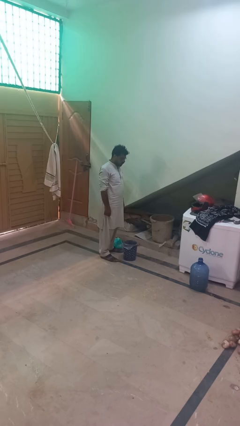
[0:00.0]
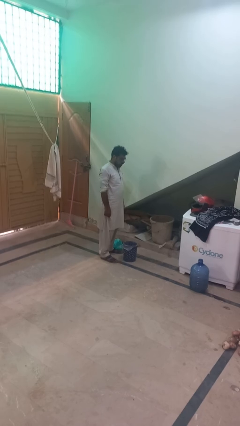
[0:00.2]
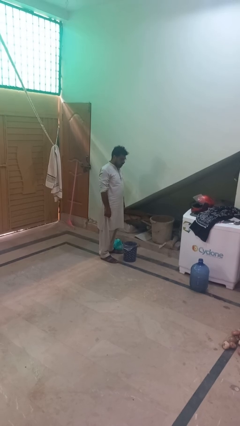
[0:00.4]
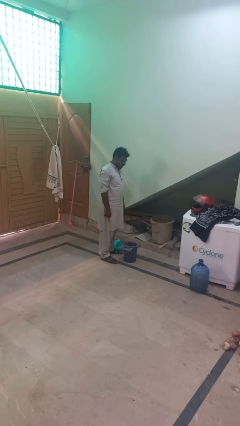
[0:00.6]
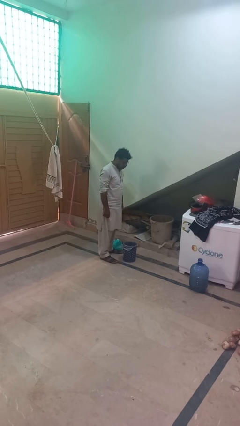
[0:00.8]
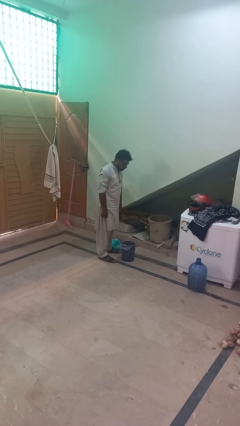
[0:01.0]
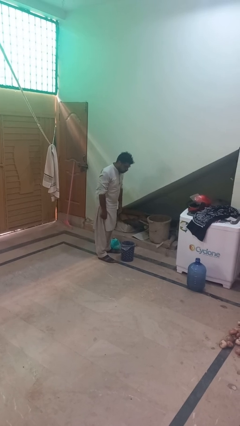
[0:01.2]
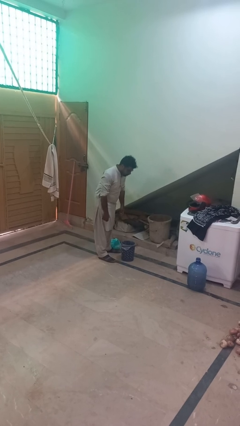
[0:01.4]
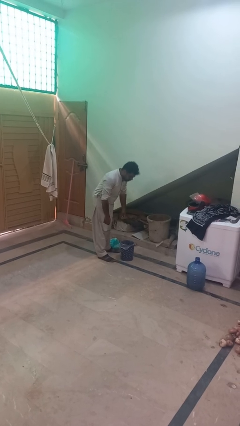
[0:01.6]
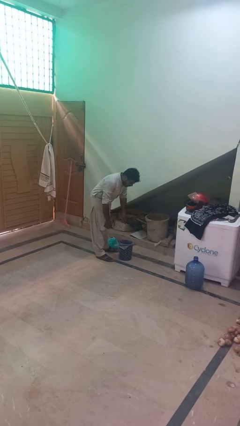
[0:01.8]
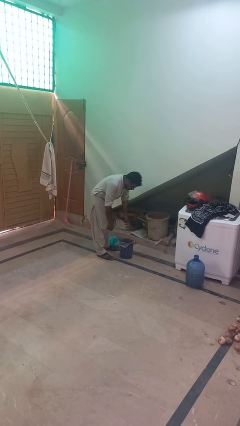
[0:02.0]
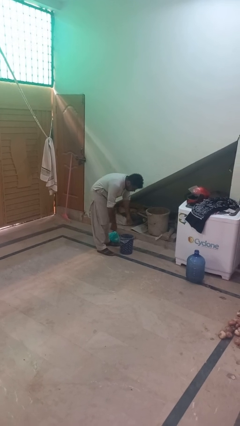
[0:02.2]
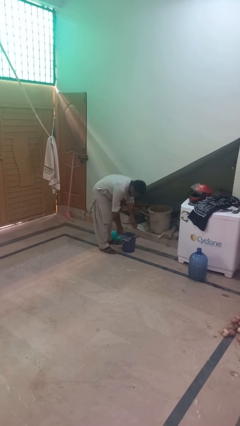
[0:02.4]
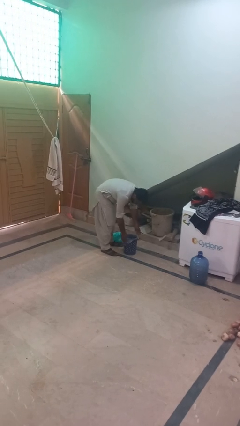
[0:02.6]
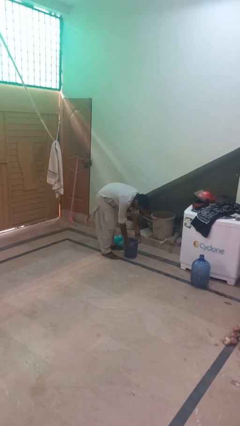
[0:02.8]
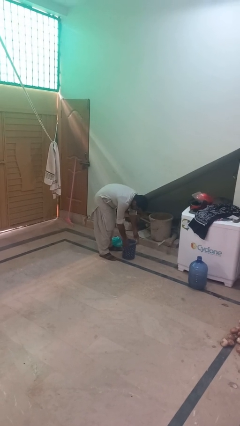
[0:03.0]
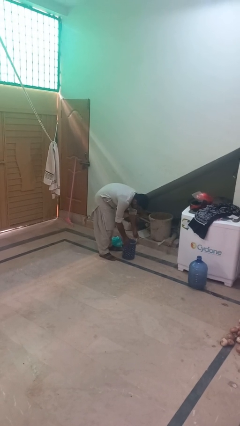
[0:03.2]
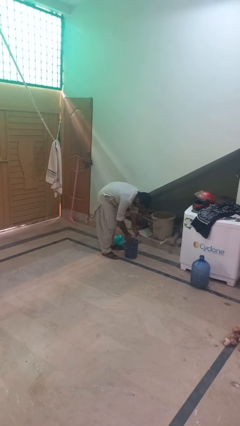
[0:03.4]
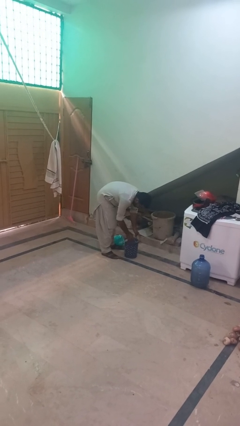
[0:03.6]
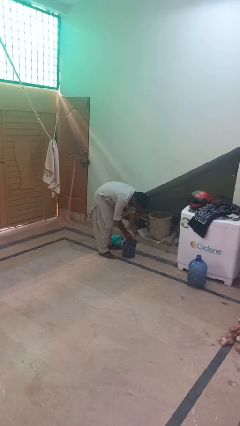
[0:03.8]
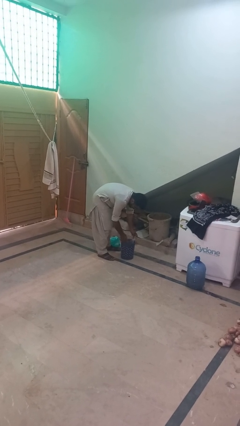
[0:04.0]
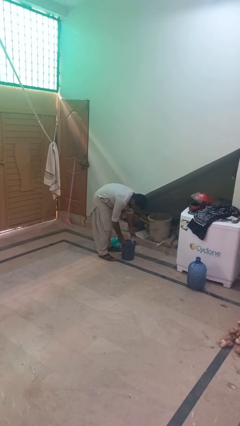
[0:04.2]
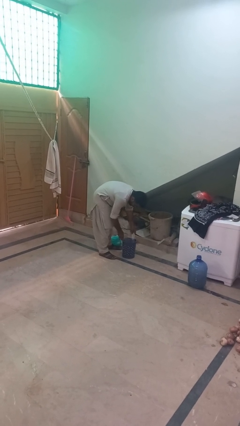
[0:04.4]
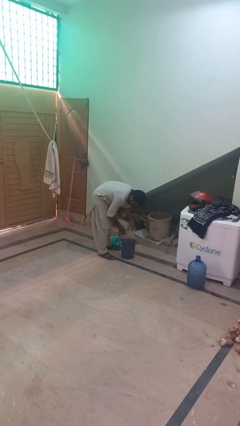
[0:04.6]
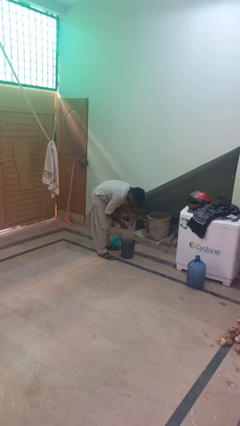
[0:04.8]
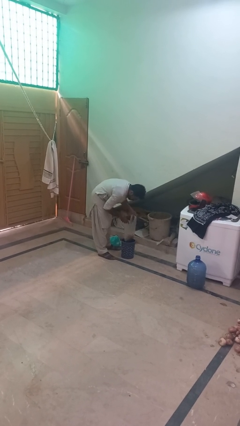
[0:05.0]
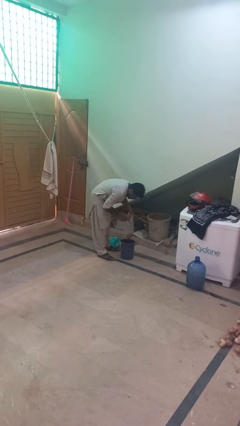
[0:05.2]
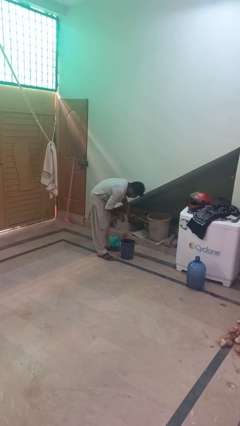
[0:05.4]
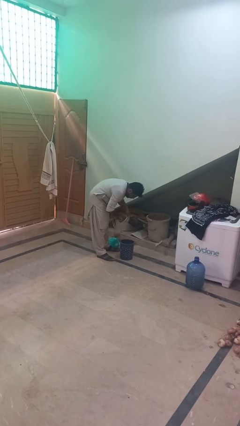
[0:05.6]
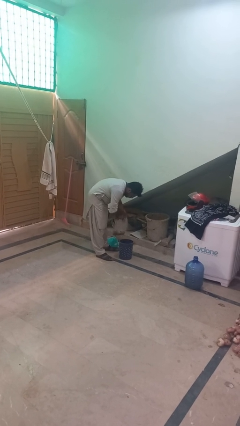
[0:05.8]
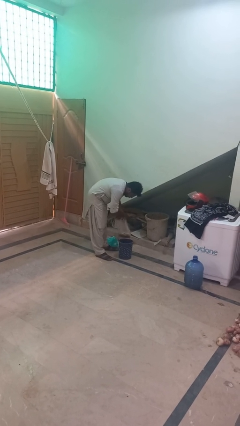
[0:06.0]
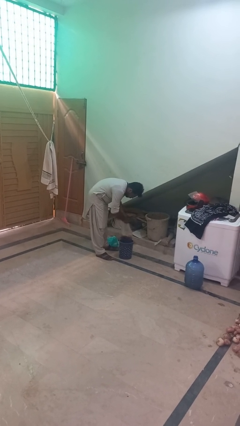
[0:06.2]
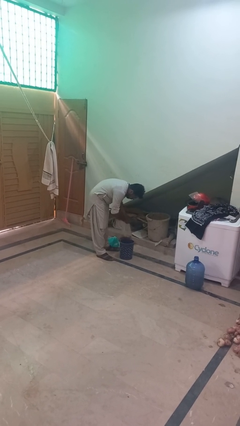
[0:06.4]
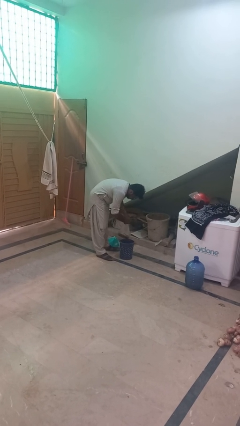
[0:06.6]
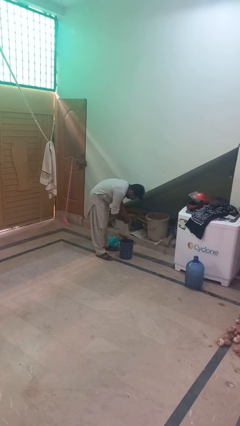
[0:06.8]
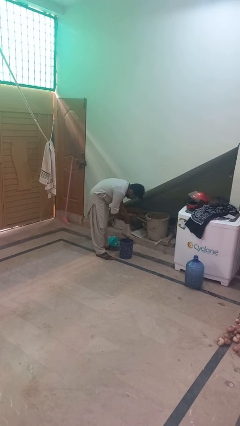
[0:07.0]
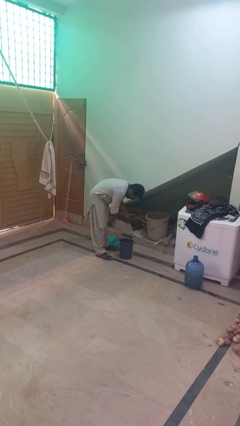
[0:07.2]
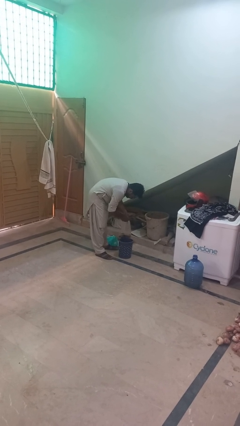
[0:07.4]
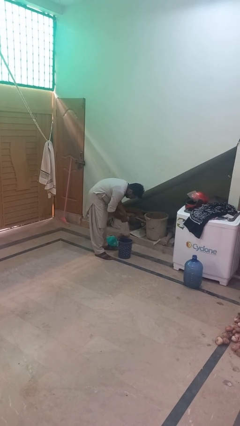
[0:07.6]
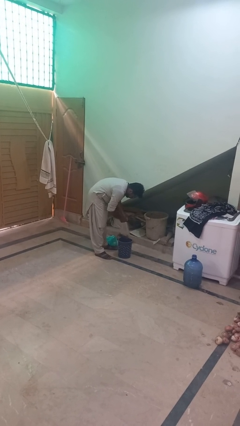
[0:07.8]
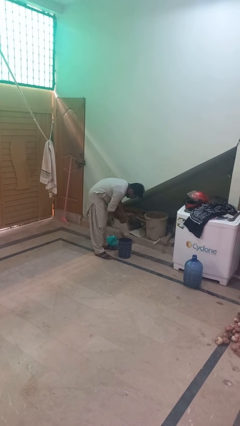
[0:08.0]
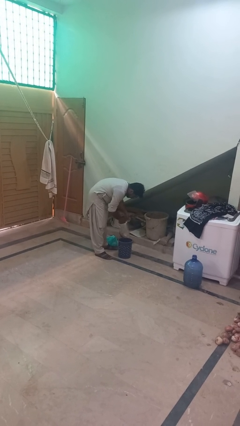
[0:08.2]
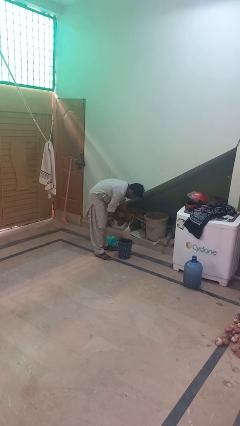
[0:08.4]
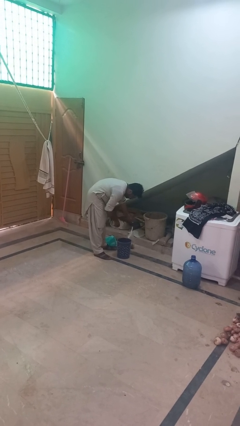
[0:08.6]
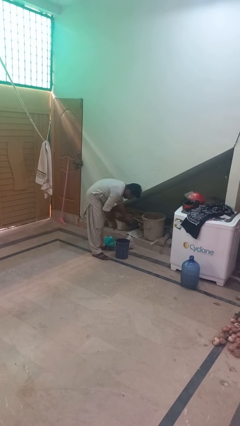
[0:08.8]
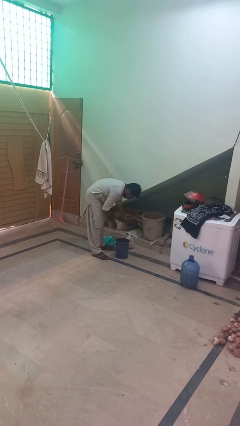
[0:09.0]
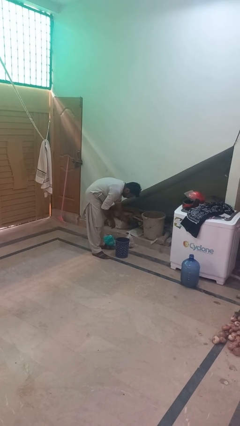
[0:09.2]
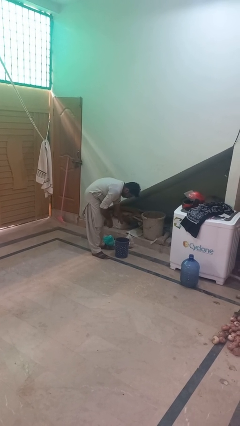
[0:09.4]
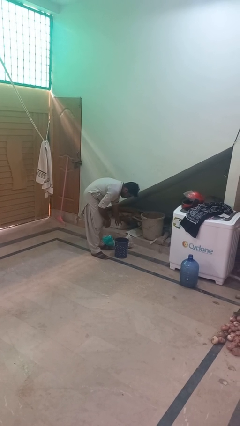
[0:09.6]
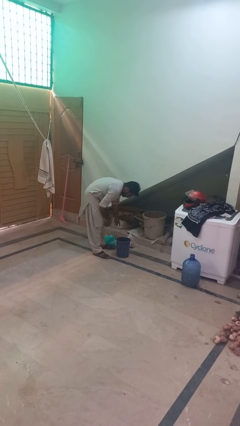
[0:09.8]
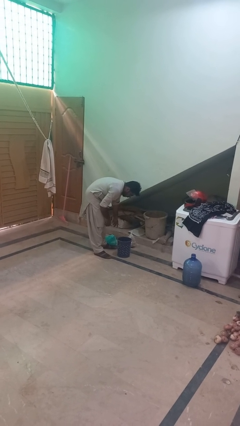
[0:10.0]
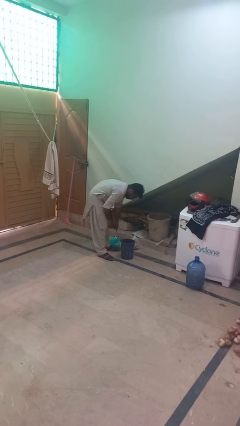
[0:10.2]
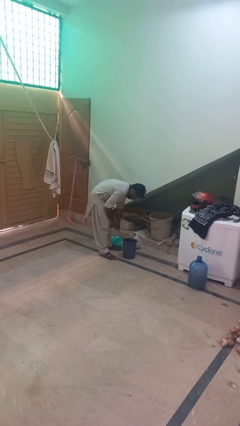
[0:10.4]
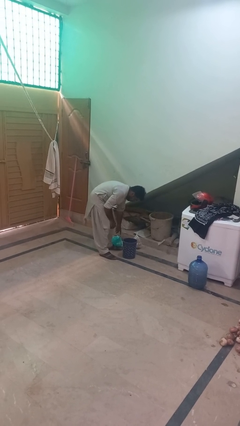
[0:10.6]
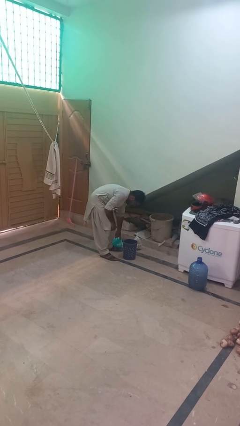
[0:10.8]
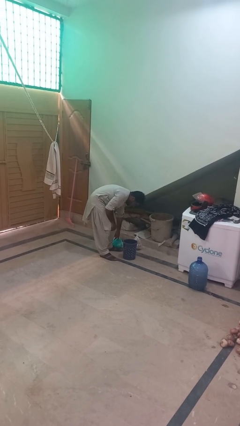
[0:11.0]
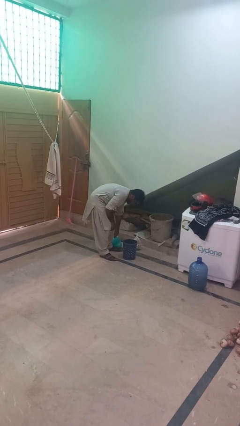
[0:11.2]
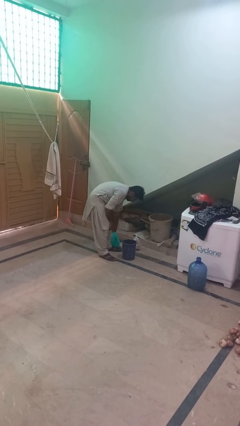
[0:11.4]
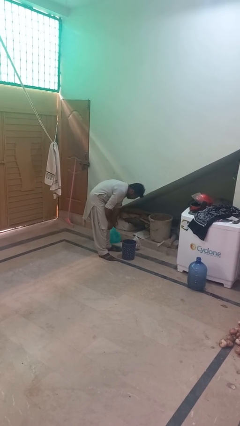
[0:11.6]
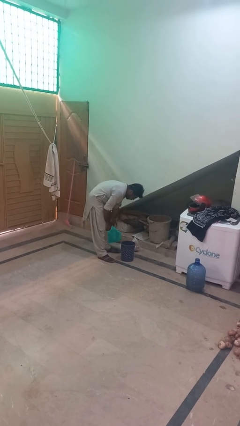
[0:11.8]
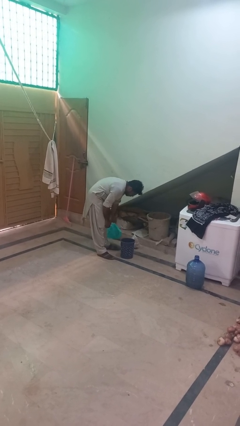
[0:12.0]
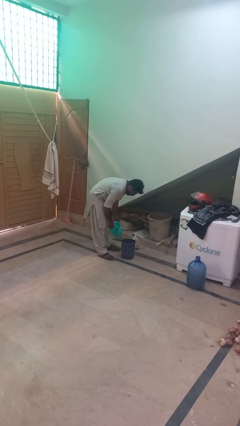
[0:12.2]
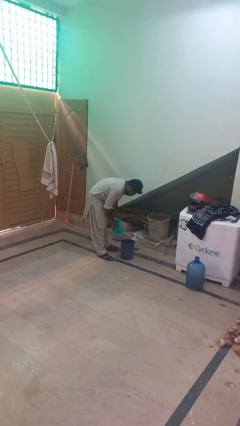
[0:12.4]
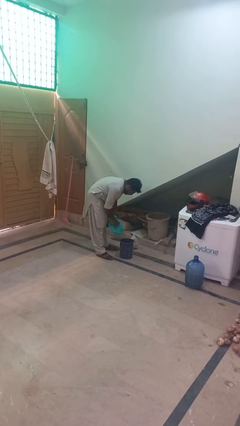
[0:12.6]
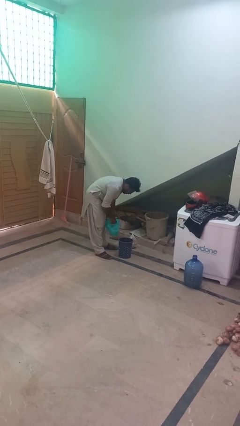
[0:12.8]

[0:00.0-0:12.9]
person removes trashbag from trashcan

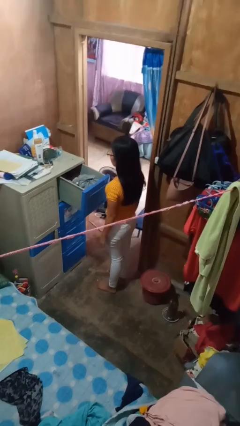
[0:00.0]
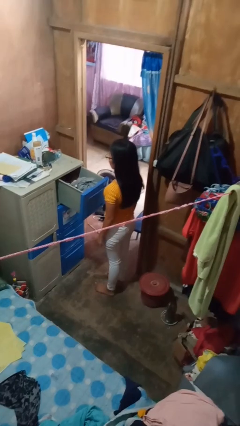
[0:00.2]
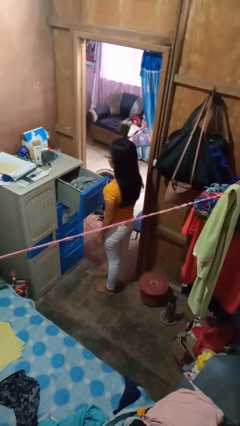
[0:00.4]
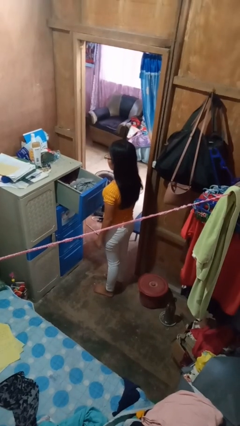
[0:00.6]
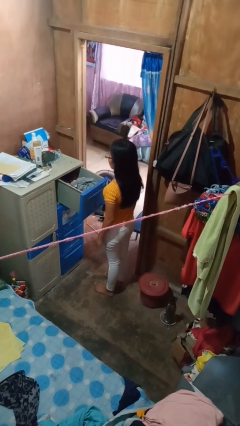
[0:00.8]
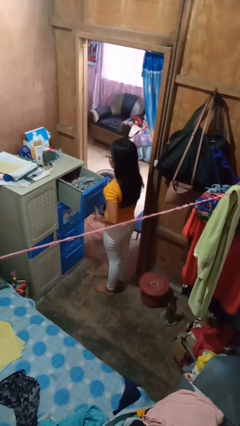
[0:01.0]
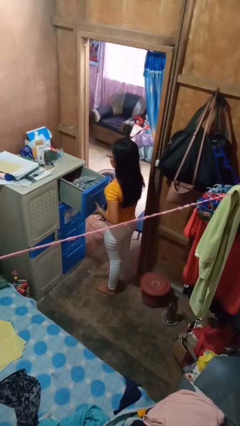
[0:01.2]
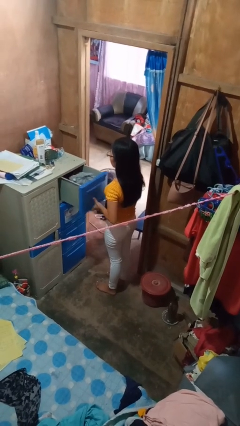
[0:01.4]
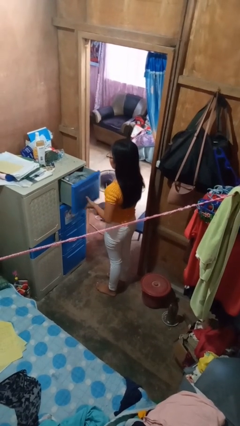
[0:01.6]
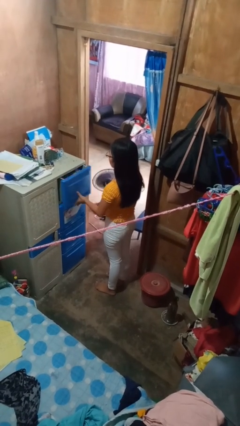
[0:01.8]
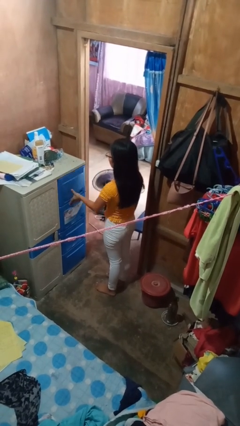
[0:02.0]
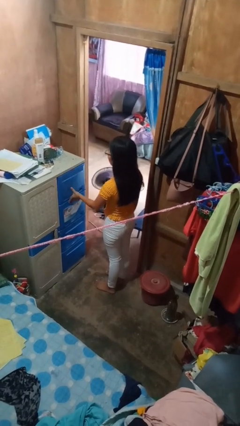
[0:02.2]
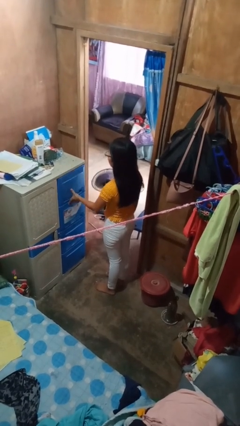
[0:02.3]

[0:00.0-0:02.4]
person closes dresser drawer

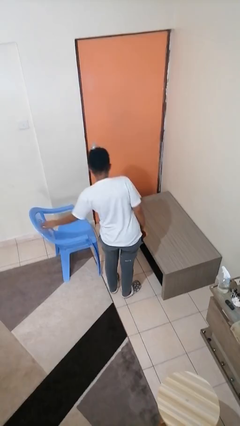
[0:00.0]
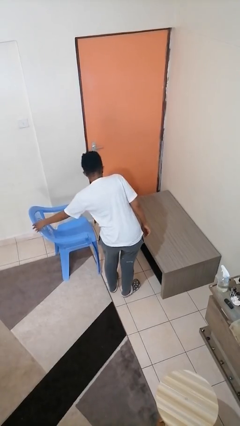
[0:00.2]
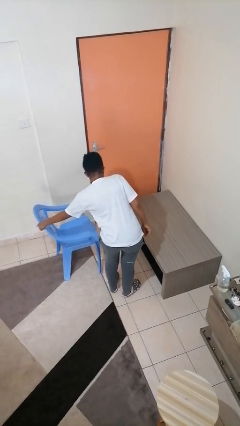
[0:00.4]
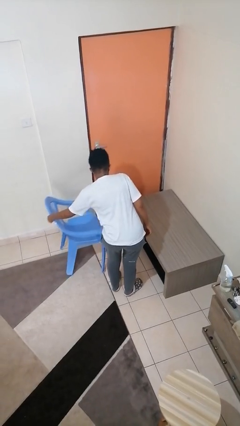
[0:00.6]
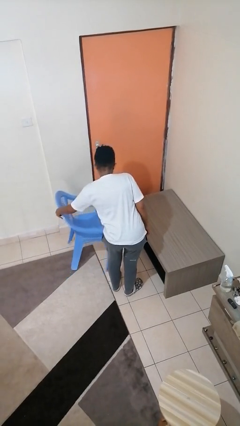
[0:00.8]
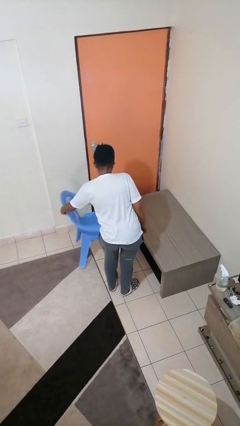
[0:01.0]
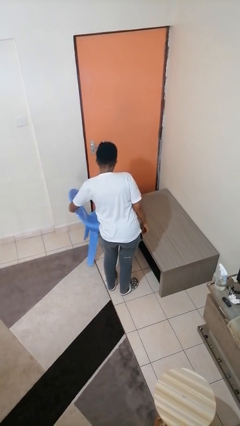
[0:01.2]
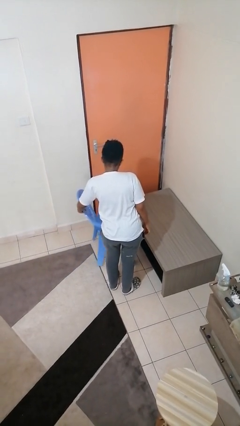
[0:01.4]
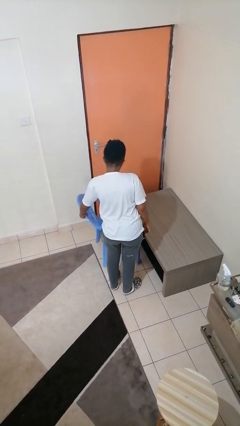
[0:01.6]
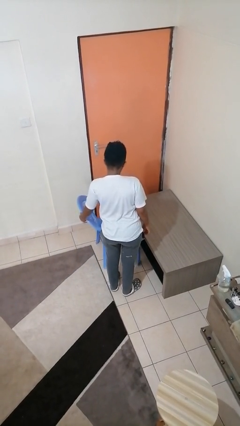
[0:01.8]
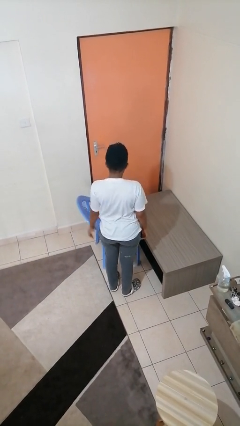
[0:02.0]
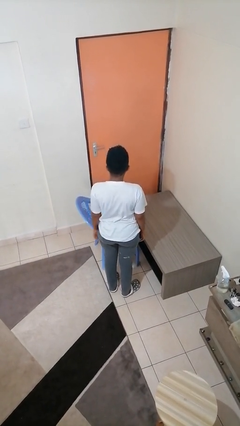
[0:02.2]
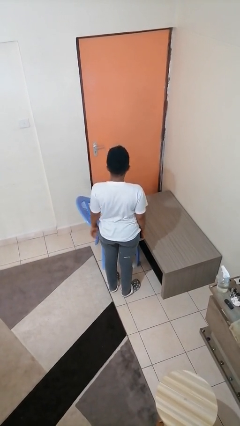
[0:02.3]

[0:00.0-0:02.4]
person pushes in chair

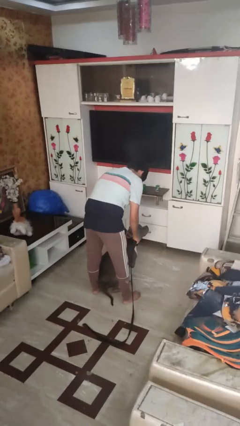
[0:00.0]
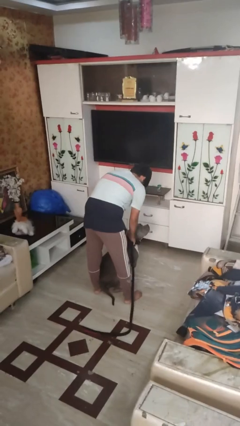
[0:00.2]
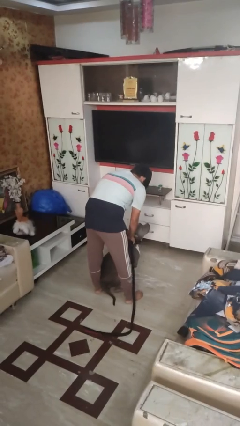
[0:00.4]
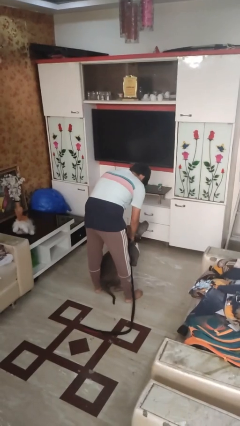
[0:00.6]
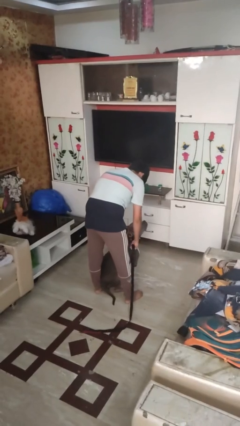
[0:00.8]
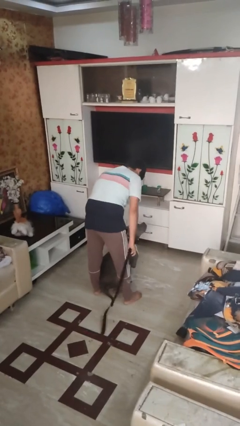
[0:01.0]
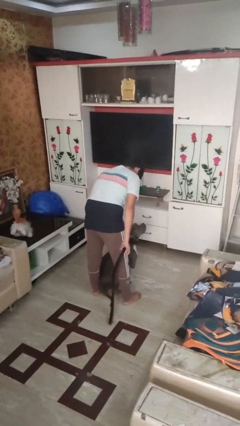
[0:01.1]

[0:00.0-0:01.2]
person attaches leash to dog
